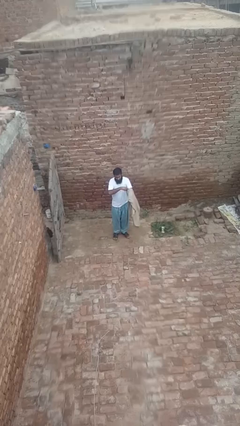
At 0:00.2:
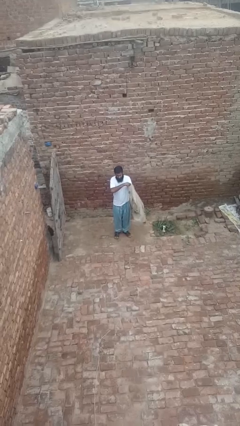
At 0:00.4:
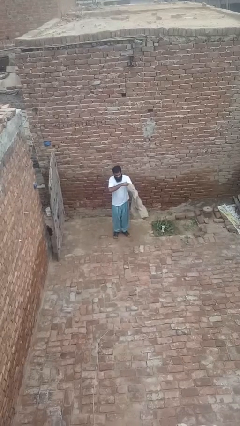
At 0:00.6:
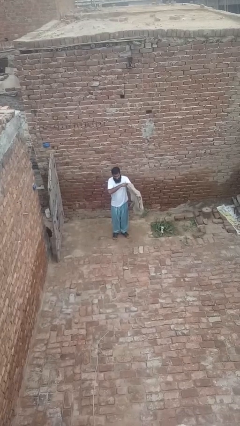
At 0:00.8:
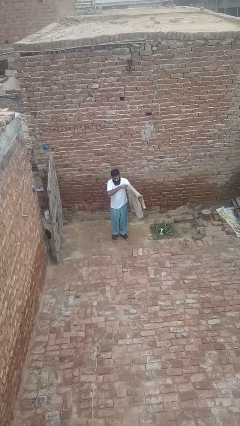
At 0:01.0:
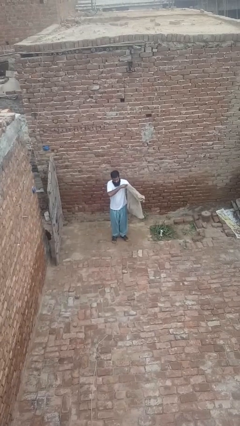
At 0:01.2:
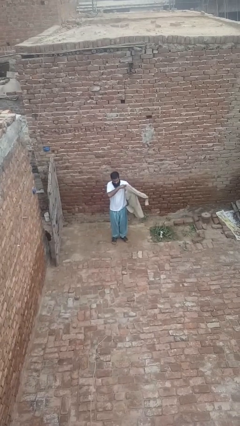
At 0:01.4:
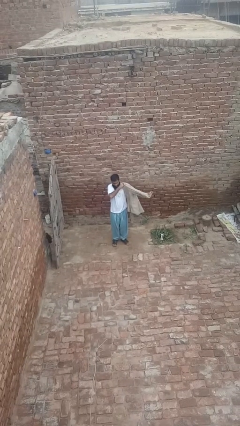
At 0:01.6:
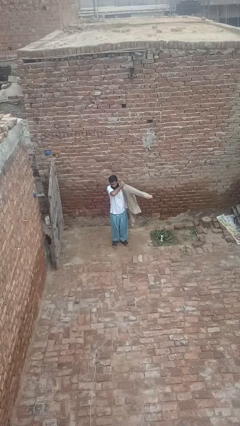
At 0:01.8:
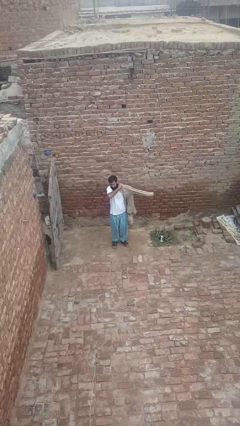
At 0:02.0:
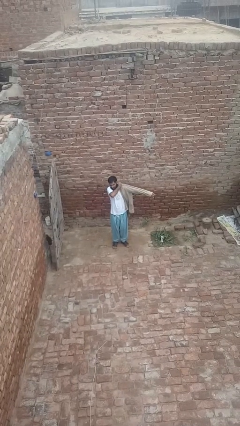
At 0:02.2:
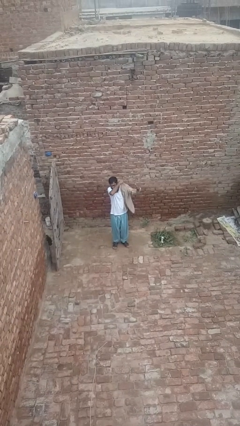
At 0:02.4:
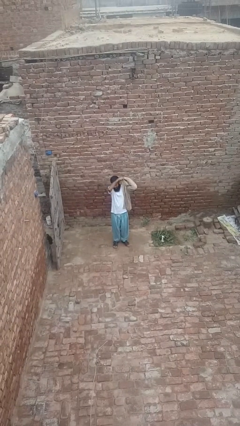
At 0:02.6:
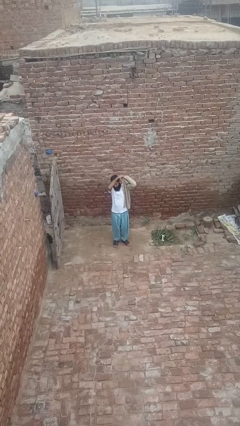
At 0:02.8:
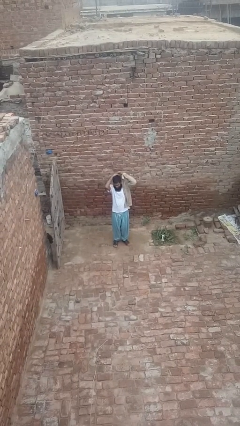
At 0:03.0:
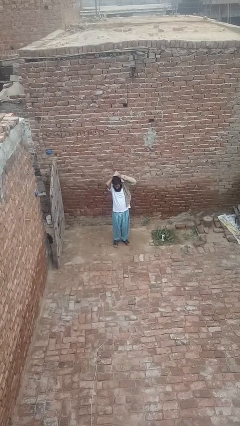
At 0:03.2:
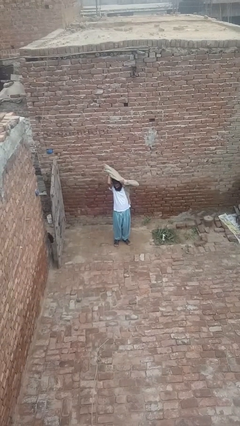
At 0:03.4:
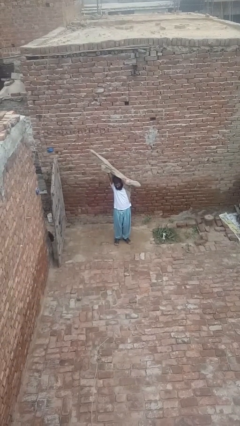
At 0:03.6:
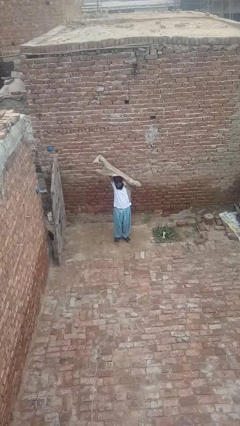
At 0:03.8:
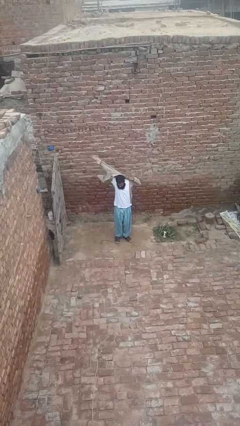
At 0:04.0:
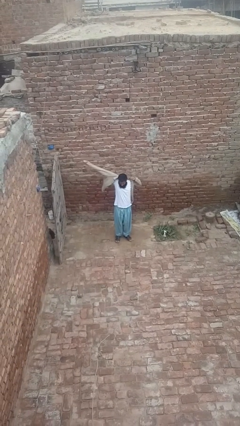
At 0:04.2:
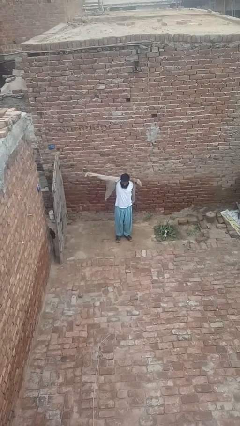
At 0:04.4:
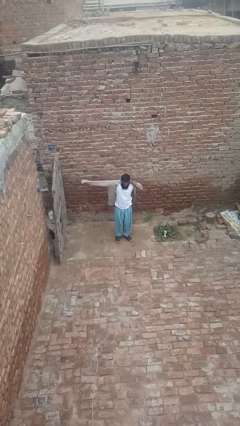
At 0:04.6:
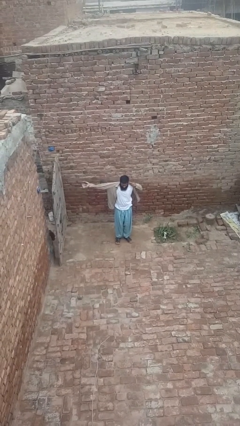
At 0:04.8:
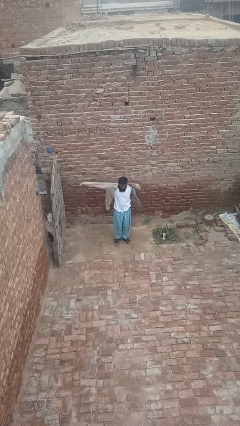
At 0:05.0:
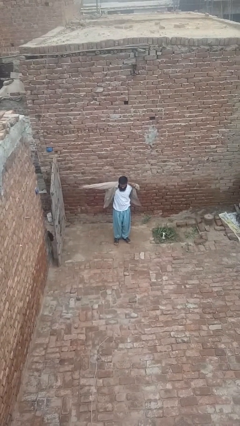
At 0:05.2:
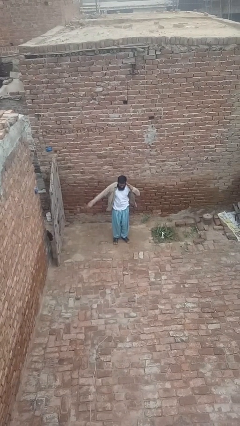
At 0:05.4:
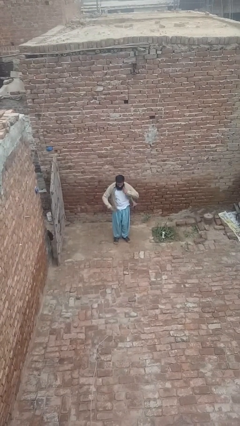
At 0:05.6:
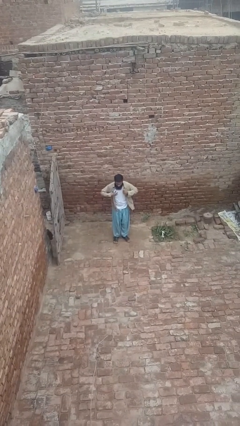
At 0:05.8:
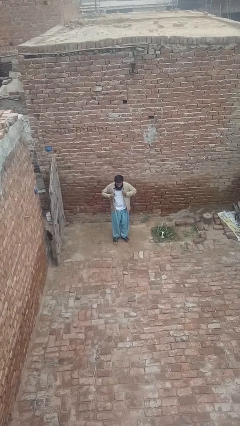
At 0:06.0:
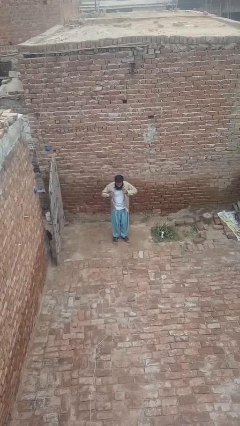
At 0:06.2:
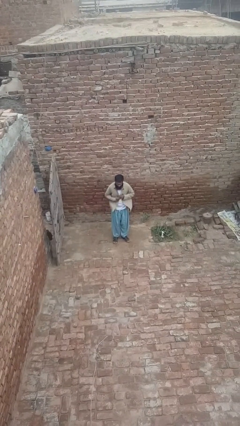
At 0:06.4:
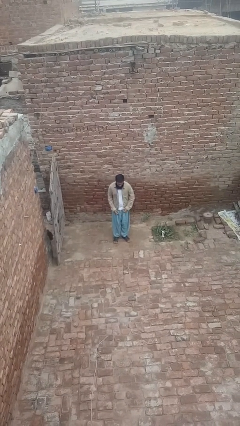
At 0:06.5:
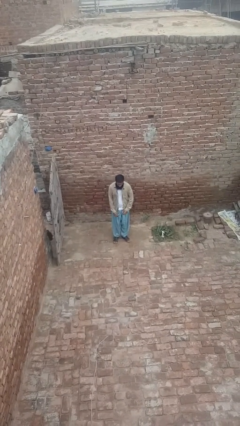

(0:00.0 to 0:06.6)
person puts on shirt

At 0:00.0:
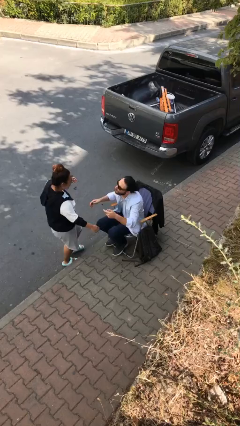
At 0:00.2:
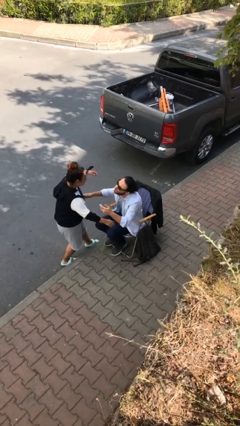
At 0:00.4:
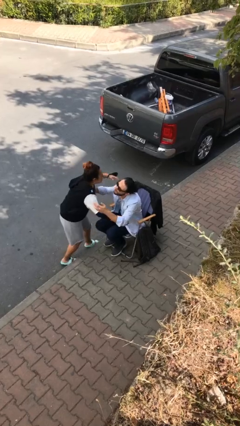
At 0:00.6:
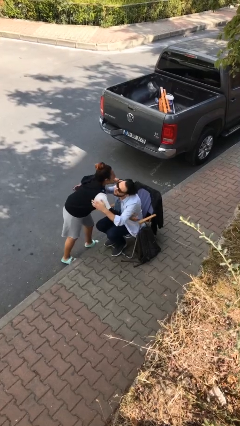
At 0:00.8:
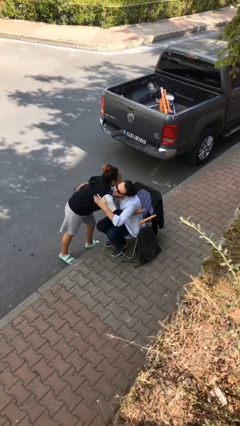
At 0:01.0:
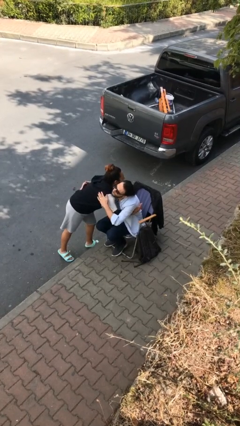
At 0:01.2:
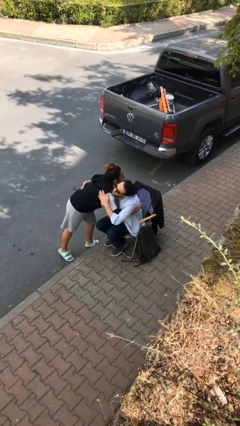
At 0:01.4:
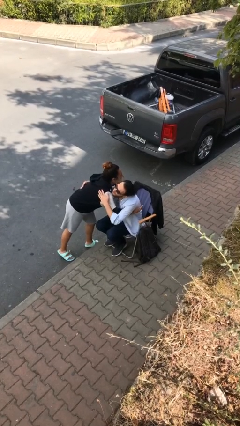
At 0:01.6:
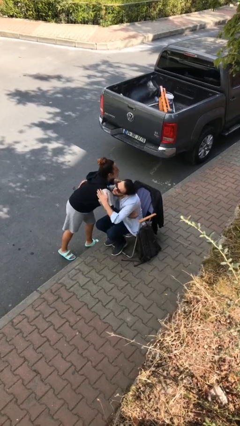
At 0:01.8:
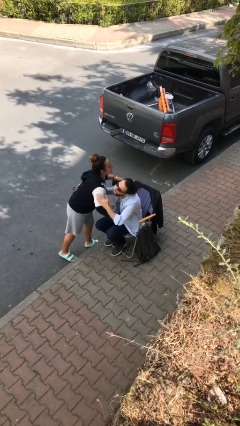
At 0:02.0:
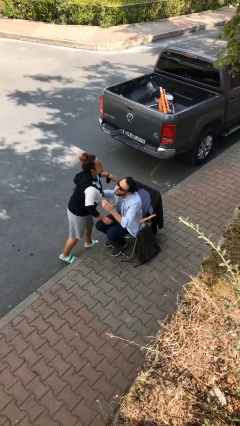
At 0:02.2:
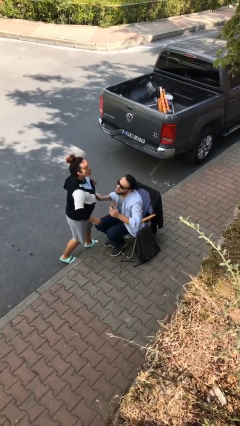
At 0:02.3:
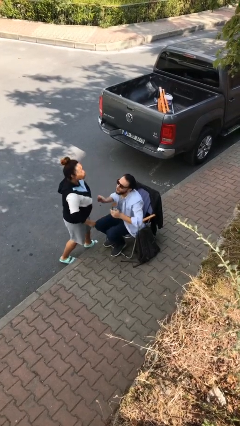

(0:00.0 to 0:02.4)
person embraces person

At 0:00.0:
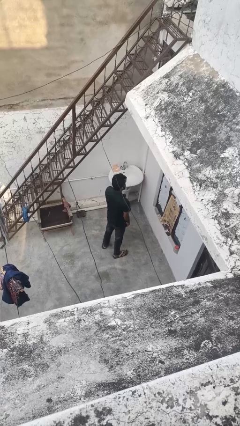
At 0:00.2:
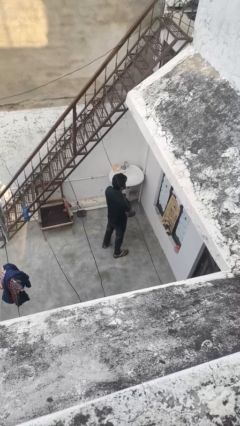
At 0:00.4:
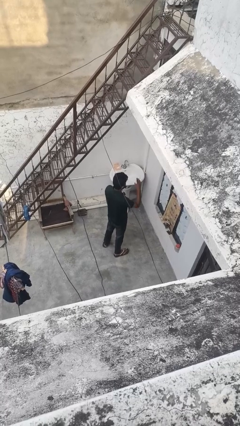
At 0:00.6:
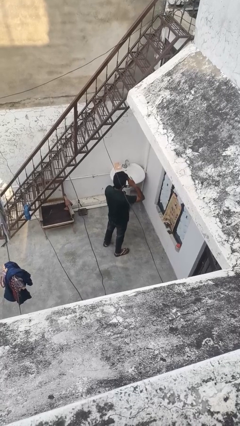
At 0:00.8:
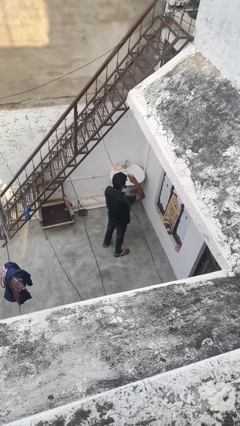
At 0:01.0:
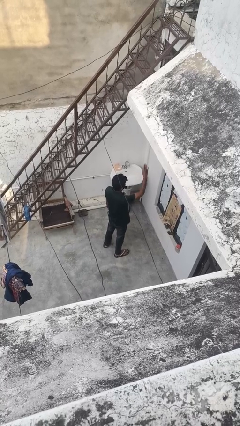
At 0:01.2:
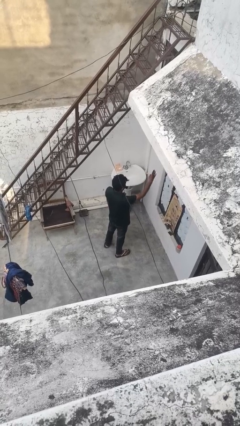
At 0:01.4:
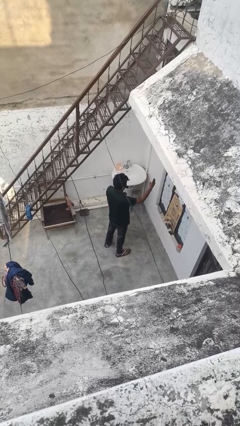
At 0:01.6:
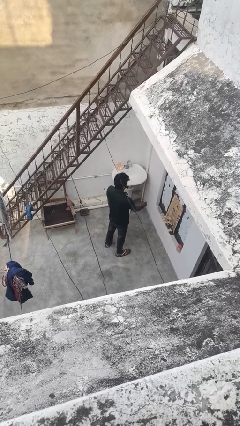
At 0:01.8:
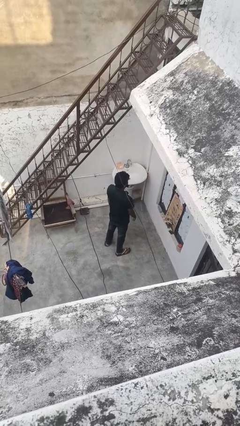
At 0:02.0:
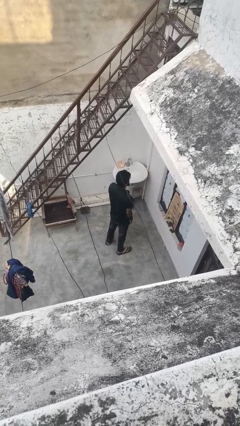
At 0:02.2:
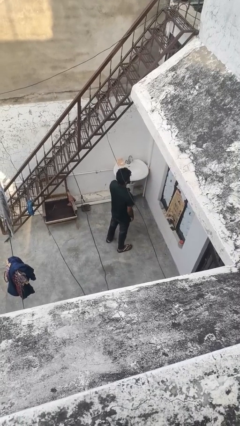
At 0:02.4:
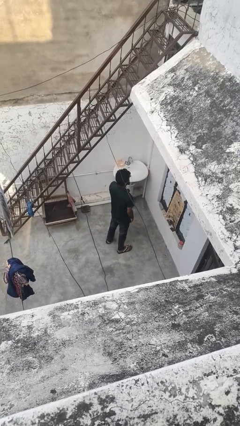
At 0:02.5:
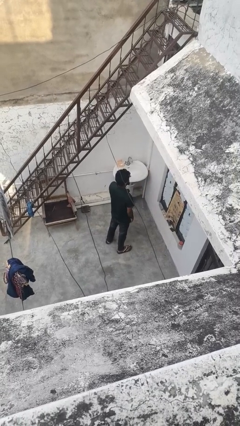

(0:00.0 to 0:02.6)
person salutes

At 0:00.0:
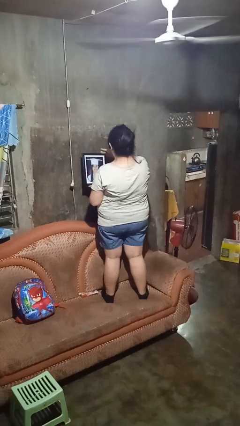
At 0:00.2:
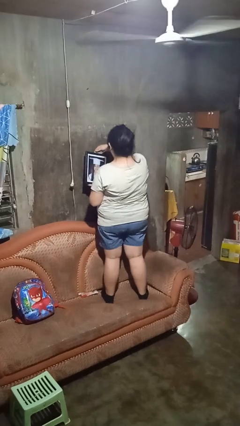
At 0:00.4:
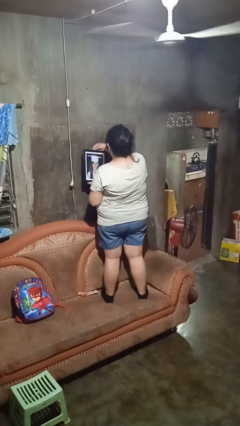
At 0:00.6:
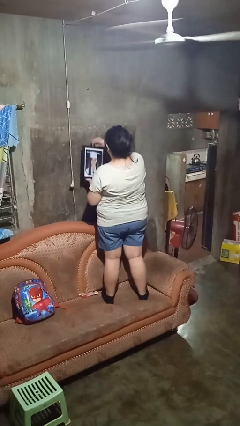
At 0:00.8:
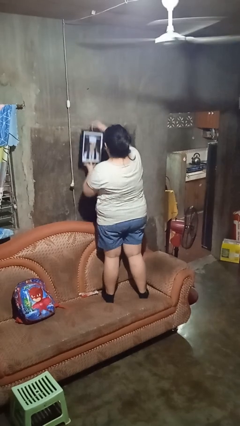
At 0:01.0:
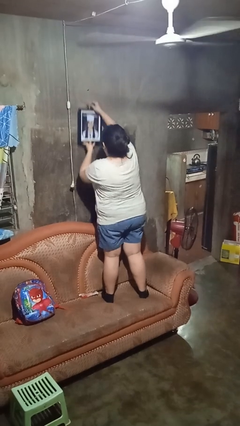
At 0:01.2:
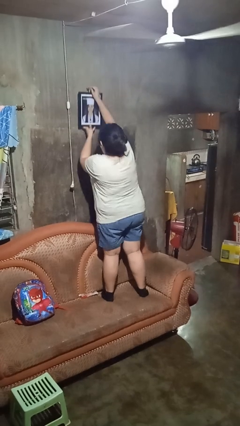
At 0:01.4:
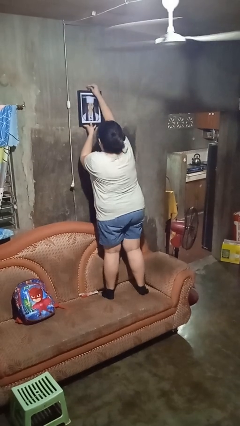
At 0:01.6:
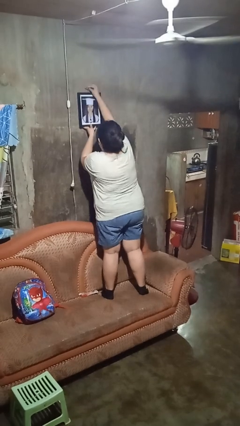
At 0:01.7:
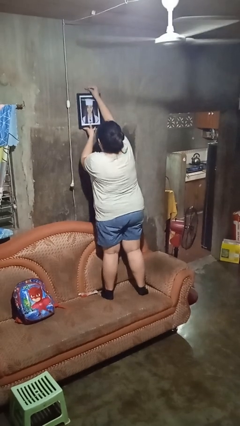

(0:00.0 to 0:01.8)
person puts up picture frame

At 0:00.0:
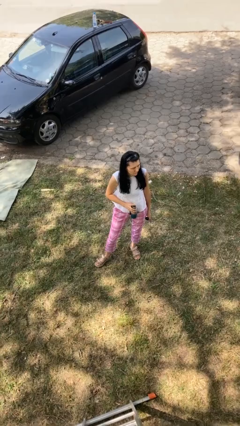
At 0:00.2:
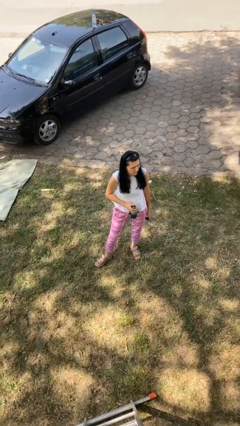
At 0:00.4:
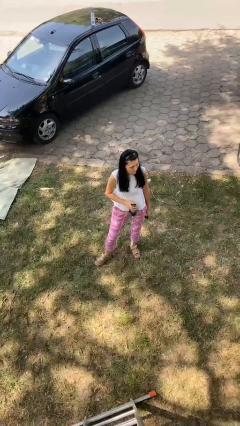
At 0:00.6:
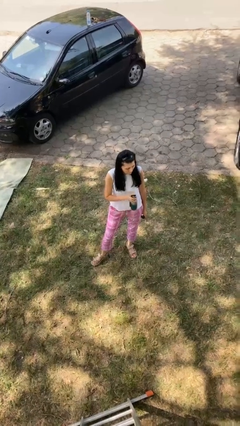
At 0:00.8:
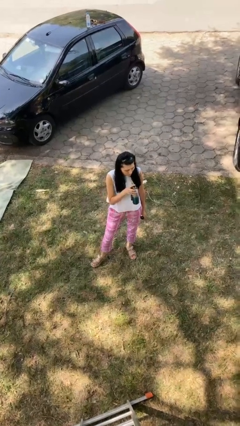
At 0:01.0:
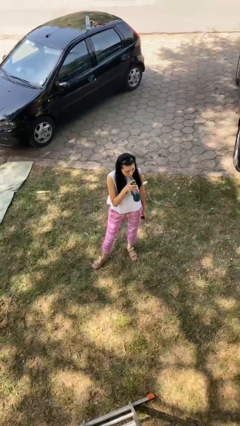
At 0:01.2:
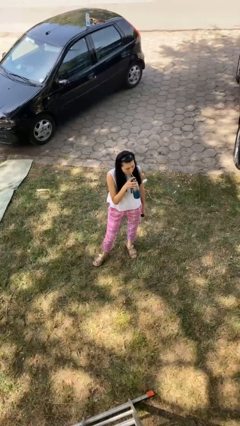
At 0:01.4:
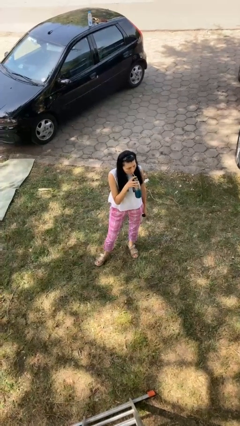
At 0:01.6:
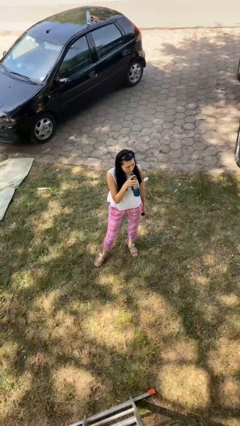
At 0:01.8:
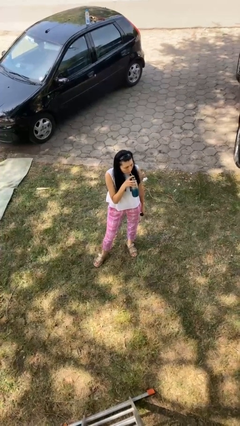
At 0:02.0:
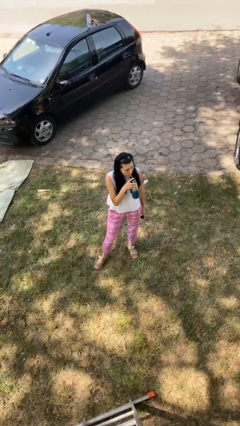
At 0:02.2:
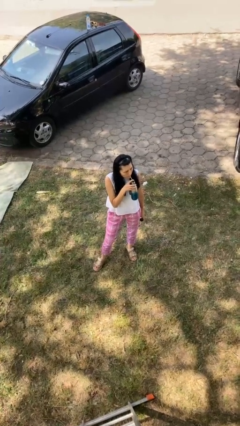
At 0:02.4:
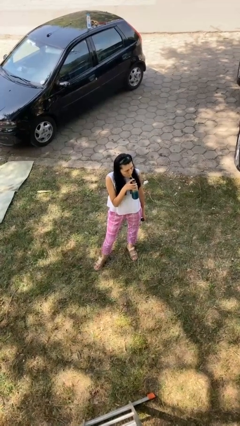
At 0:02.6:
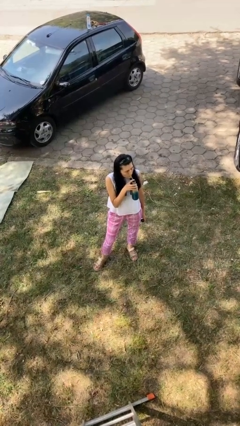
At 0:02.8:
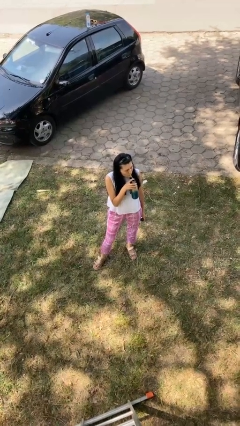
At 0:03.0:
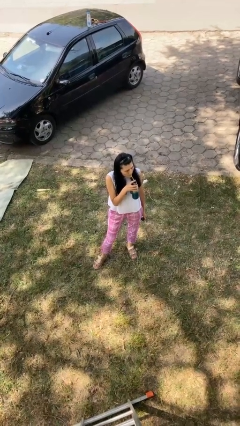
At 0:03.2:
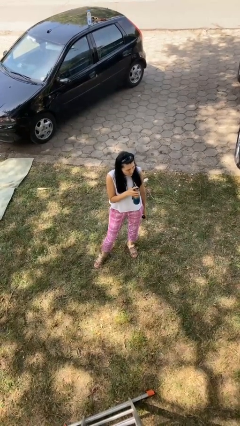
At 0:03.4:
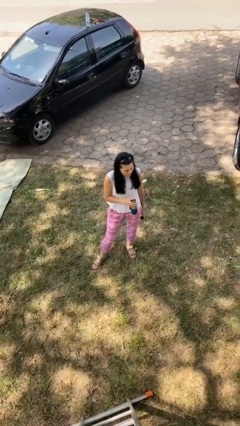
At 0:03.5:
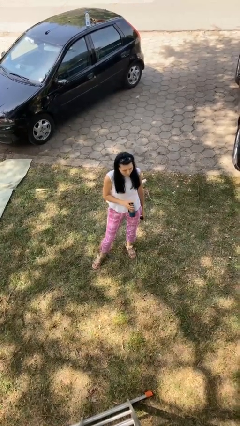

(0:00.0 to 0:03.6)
person drinks from straw

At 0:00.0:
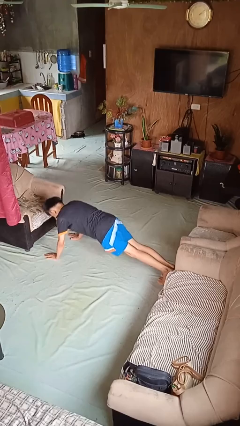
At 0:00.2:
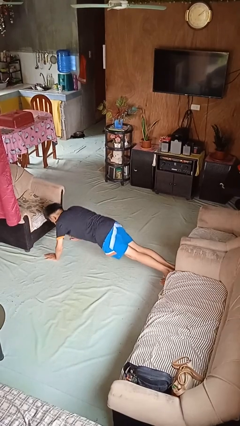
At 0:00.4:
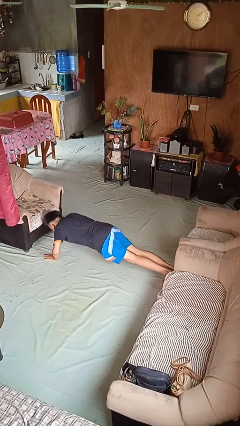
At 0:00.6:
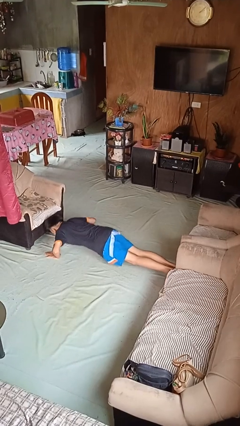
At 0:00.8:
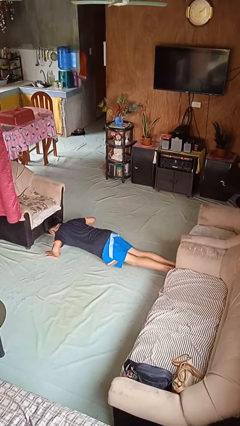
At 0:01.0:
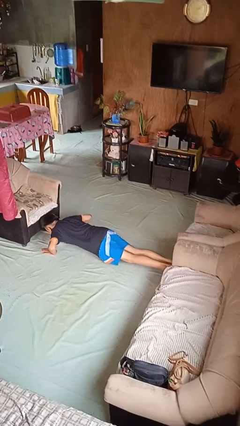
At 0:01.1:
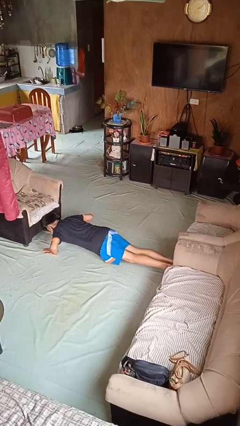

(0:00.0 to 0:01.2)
person exercises with pushup
